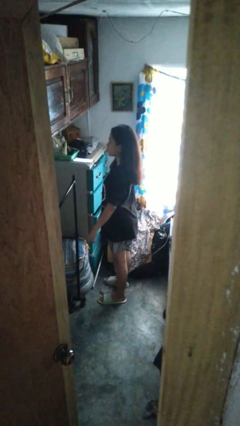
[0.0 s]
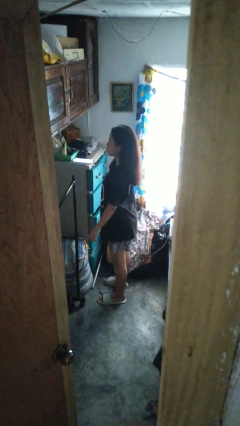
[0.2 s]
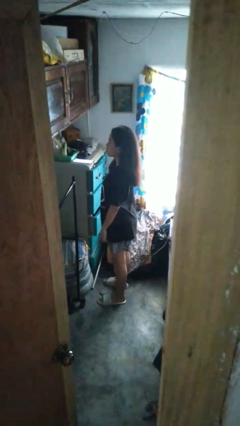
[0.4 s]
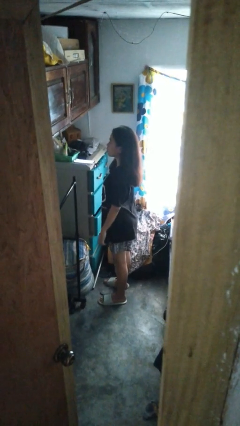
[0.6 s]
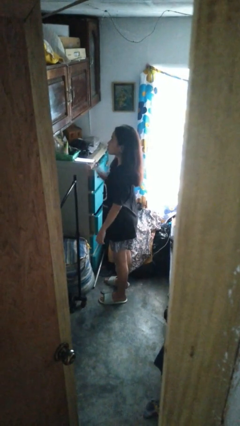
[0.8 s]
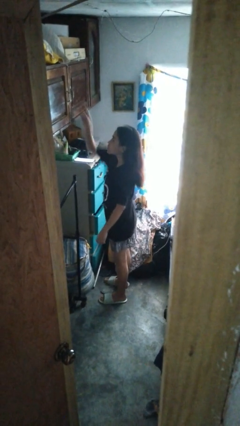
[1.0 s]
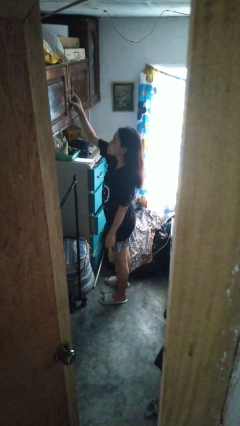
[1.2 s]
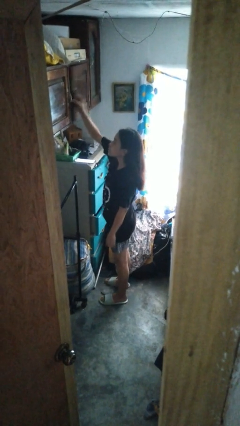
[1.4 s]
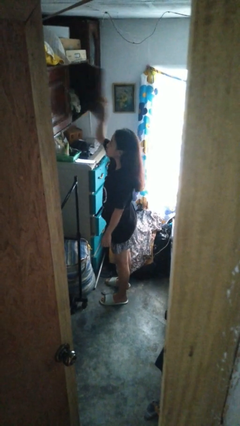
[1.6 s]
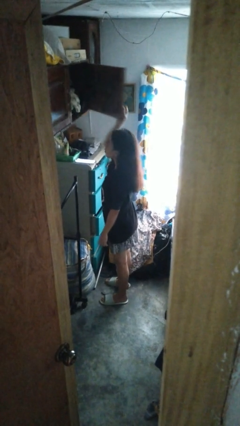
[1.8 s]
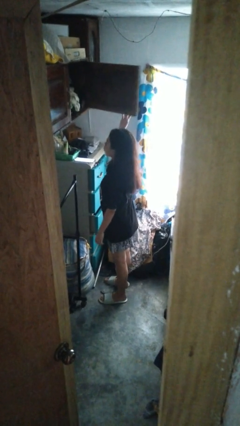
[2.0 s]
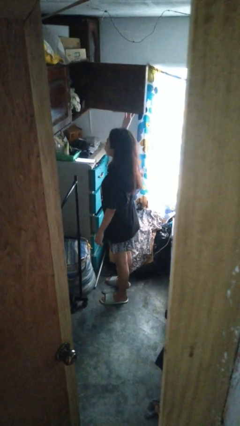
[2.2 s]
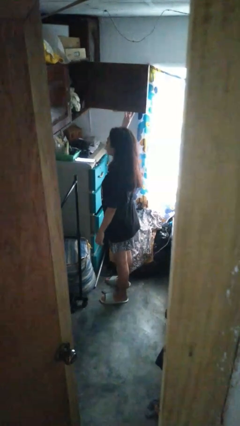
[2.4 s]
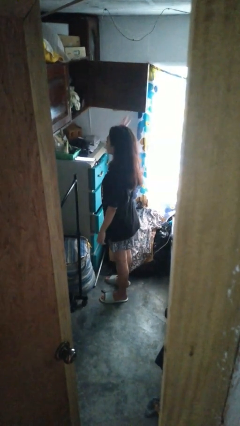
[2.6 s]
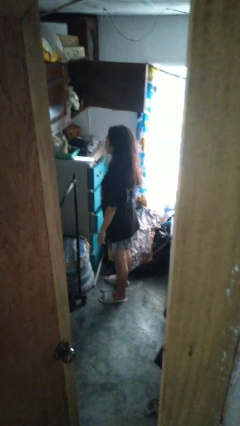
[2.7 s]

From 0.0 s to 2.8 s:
person opens closet door

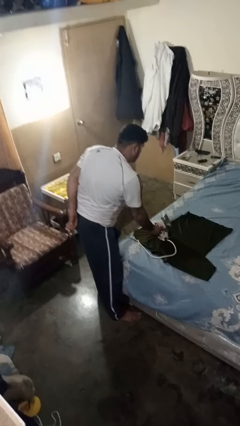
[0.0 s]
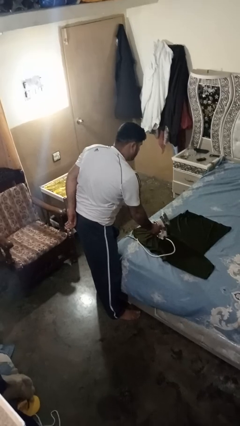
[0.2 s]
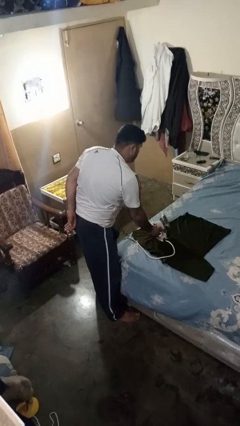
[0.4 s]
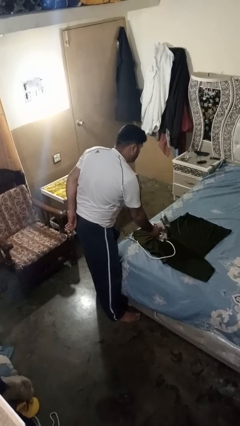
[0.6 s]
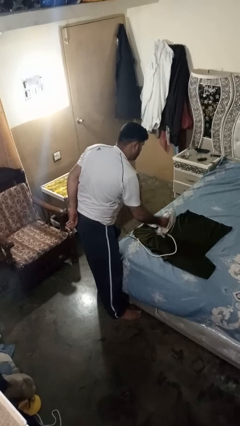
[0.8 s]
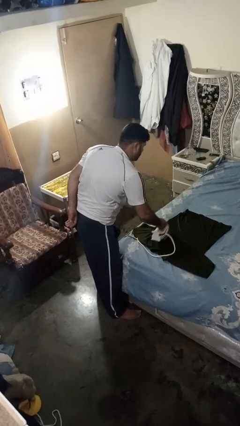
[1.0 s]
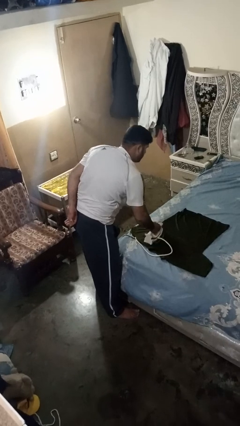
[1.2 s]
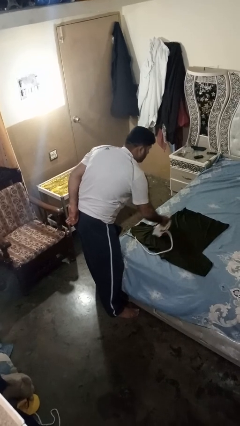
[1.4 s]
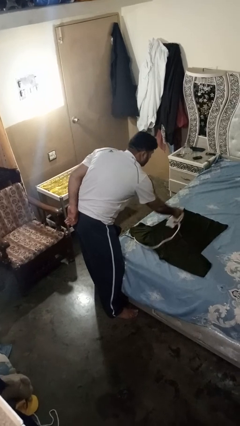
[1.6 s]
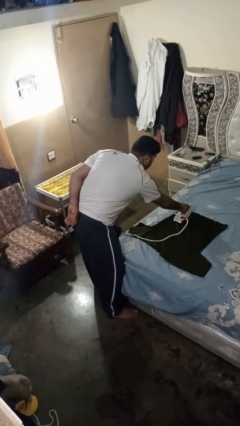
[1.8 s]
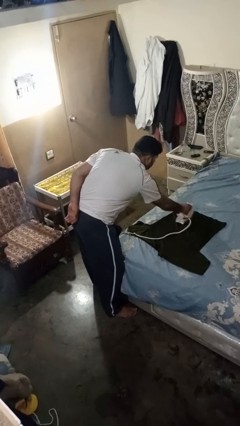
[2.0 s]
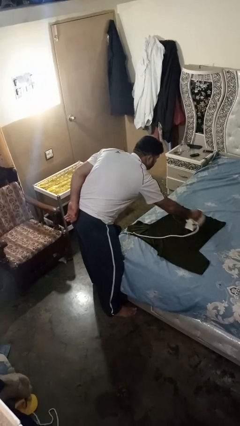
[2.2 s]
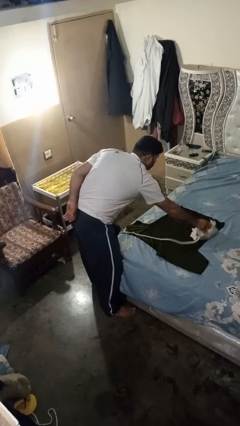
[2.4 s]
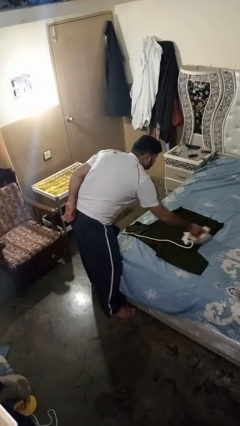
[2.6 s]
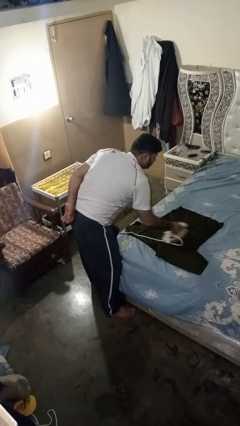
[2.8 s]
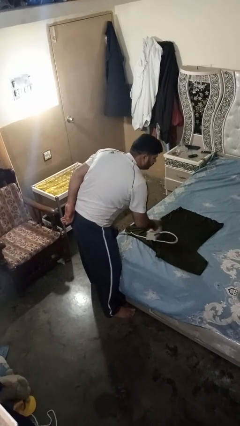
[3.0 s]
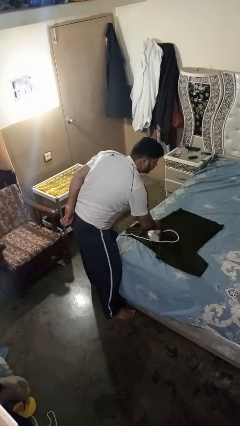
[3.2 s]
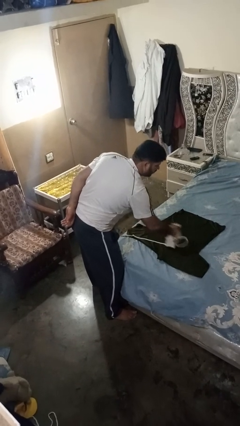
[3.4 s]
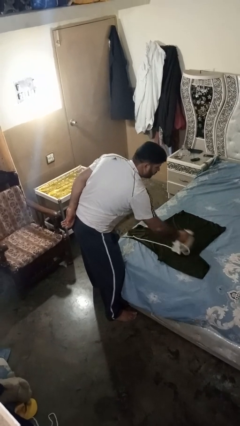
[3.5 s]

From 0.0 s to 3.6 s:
person irons clothes

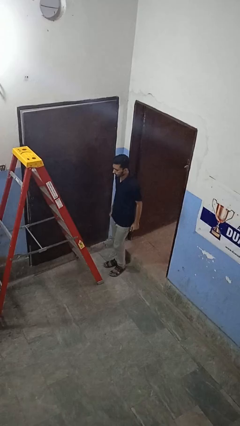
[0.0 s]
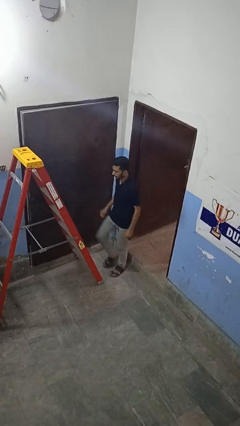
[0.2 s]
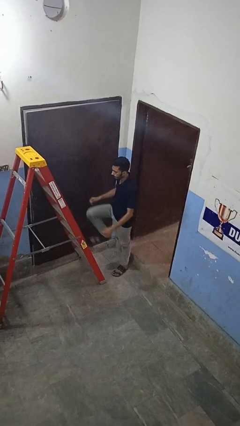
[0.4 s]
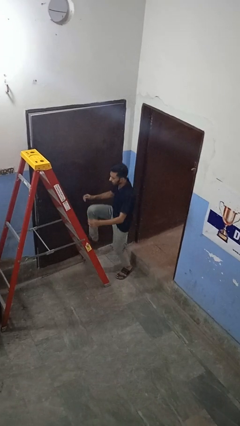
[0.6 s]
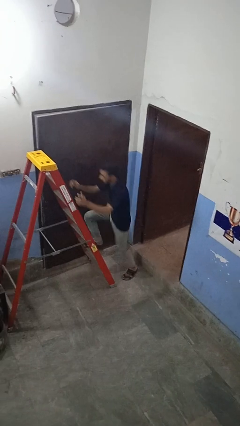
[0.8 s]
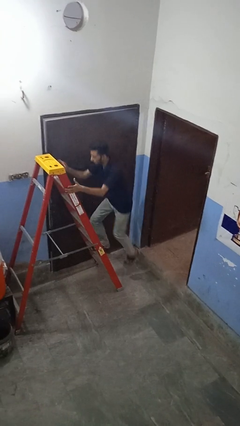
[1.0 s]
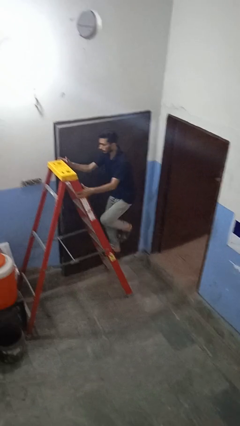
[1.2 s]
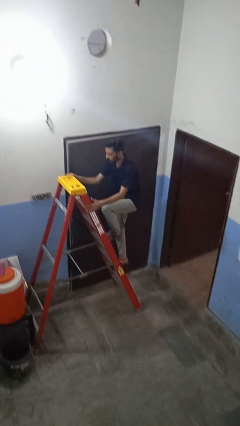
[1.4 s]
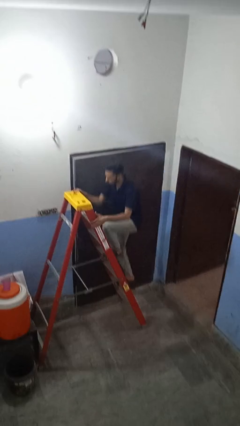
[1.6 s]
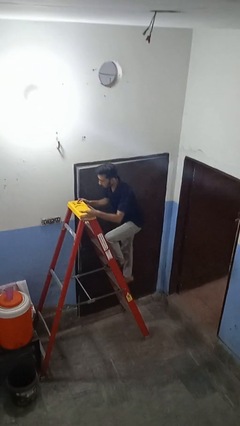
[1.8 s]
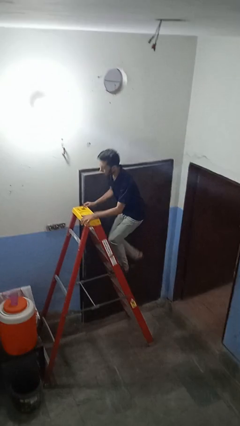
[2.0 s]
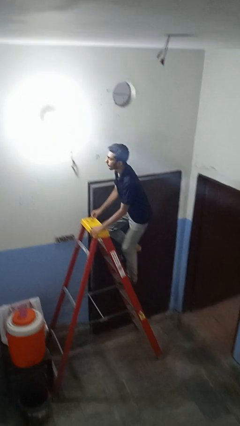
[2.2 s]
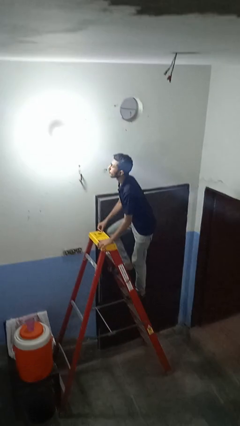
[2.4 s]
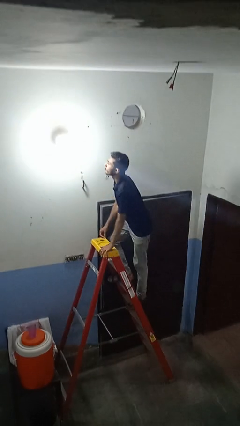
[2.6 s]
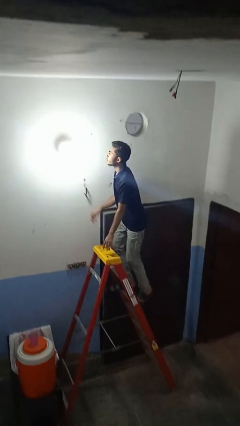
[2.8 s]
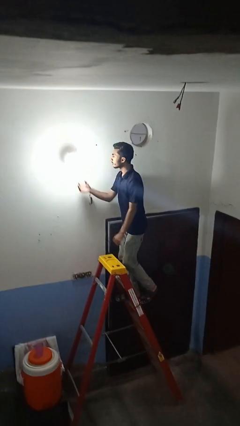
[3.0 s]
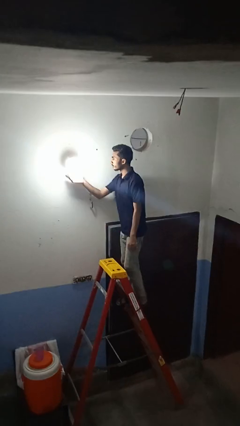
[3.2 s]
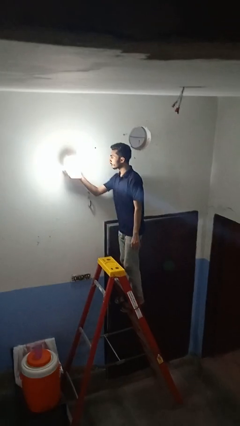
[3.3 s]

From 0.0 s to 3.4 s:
person climbs up ladder

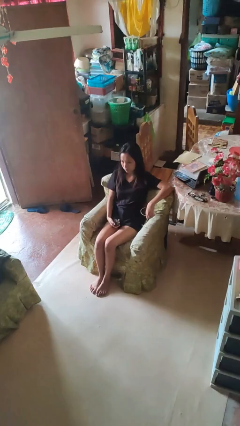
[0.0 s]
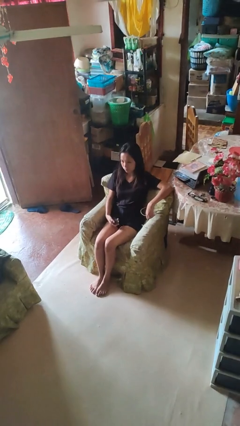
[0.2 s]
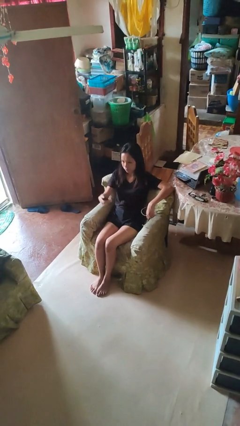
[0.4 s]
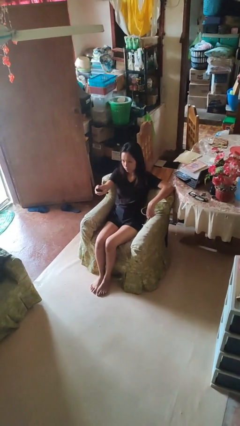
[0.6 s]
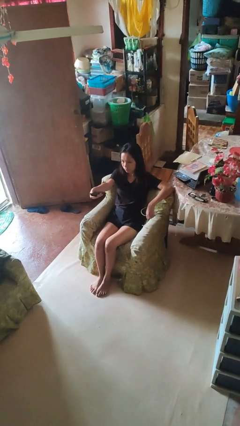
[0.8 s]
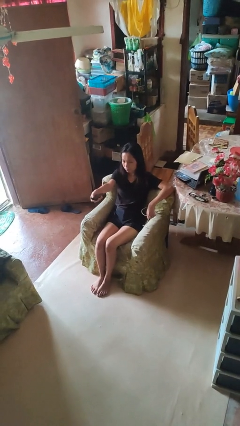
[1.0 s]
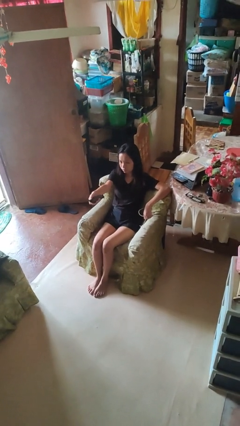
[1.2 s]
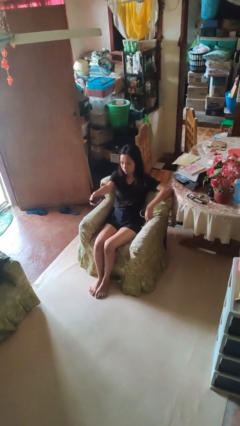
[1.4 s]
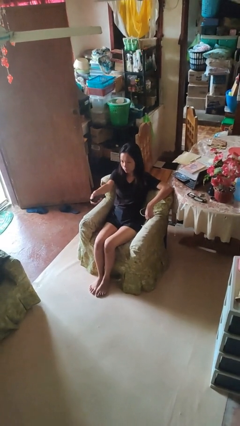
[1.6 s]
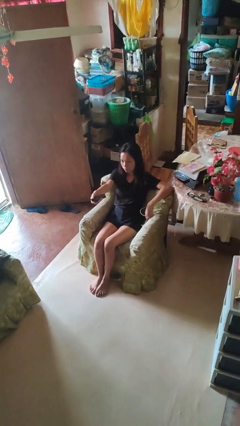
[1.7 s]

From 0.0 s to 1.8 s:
person uses television remote

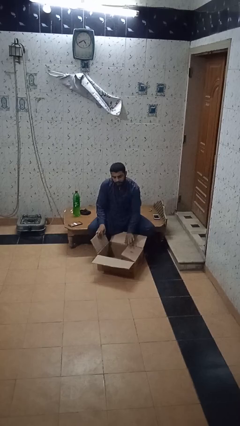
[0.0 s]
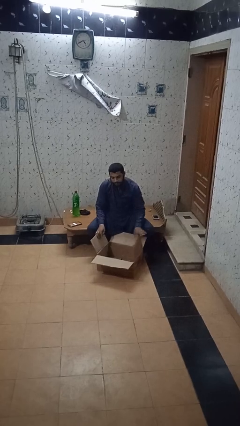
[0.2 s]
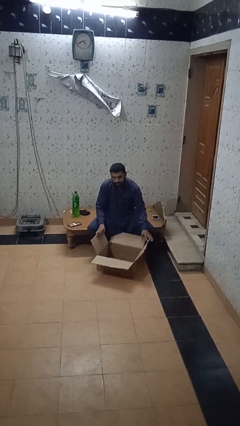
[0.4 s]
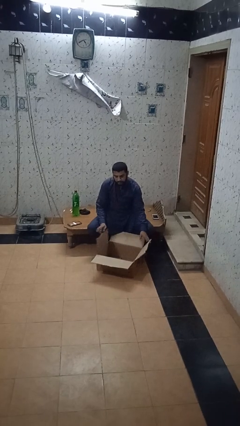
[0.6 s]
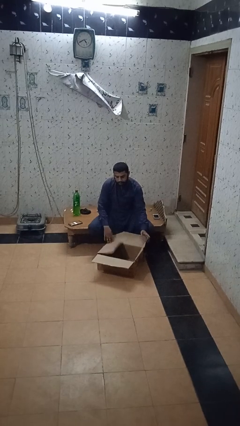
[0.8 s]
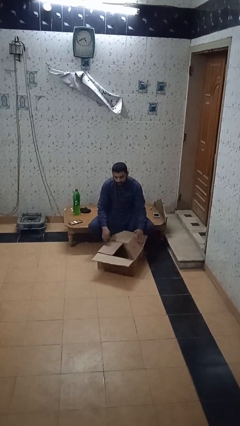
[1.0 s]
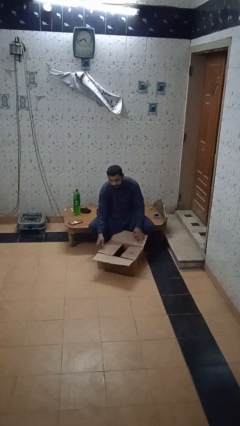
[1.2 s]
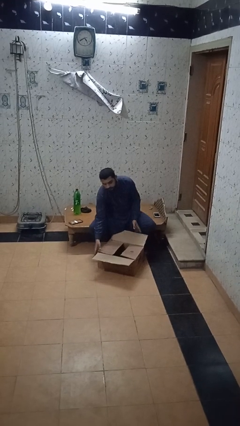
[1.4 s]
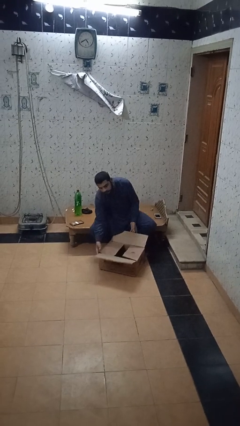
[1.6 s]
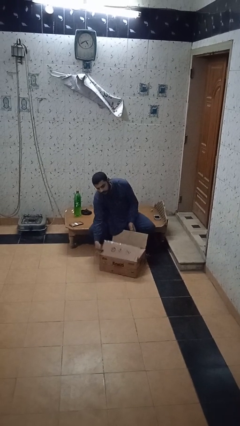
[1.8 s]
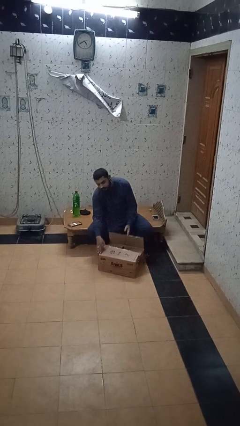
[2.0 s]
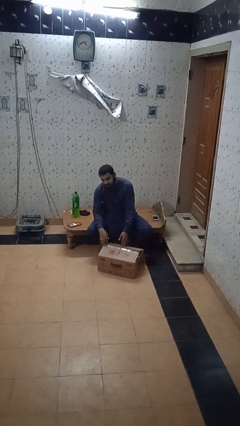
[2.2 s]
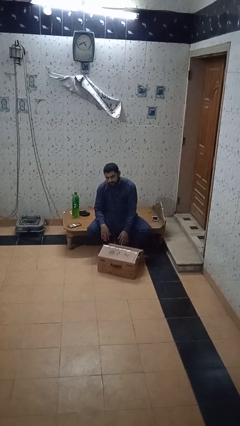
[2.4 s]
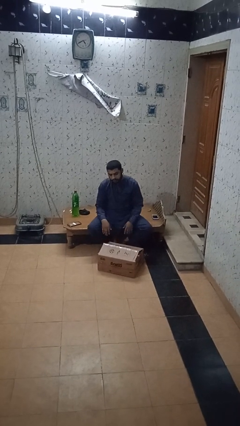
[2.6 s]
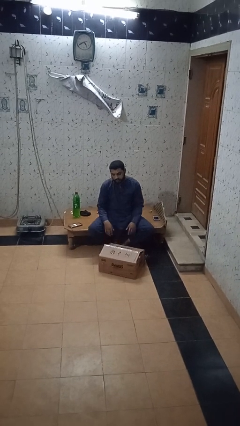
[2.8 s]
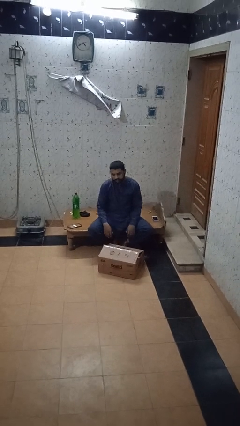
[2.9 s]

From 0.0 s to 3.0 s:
person closes box

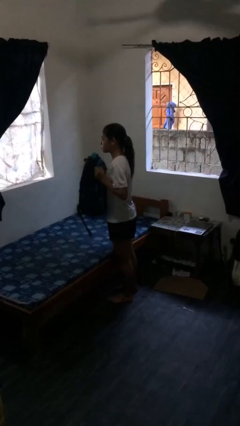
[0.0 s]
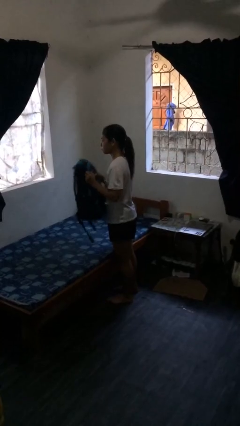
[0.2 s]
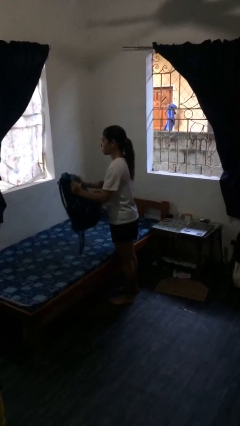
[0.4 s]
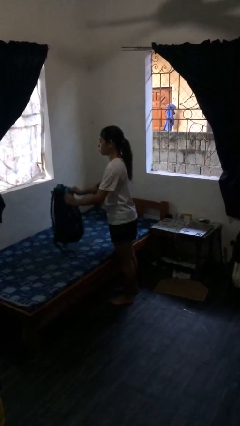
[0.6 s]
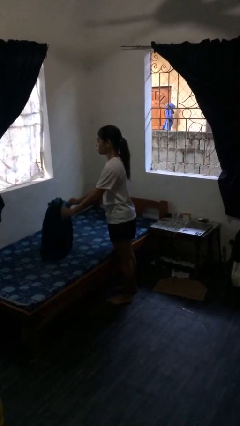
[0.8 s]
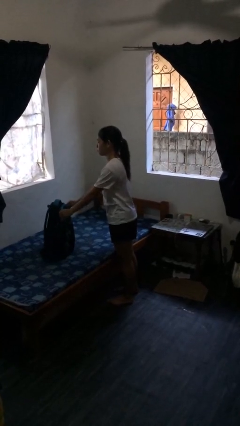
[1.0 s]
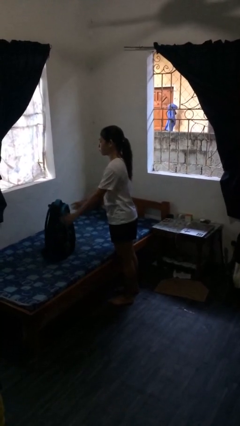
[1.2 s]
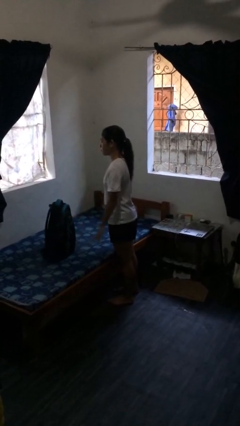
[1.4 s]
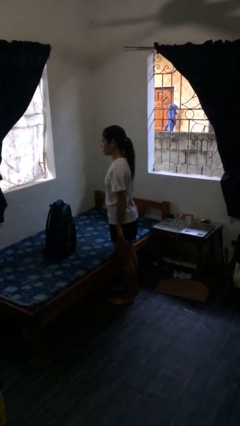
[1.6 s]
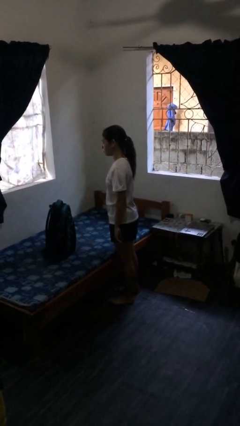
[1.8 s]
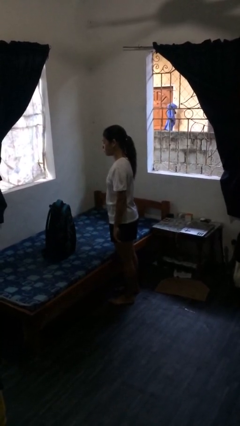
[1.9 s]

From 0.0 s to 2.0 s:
person puts down object on bed
